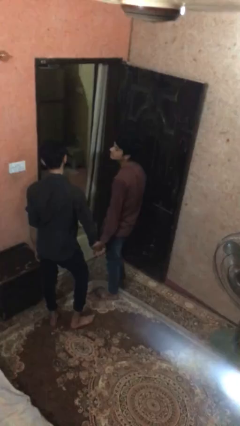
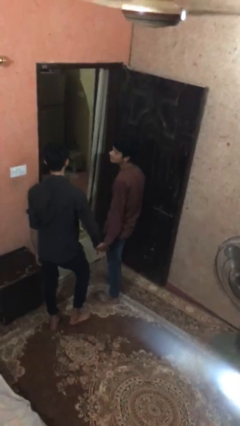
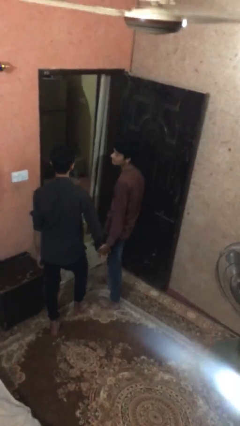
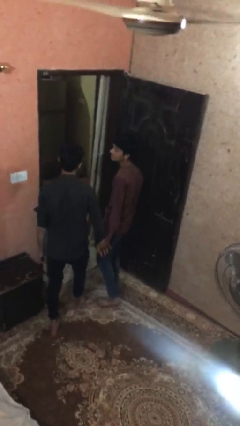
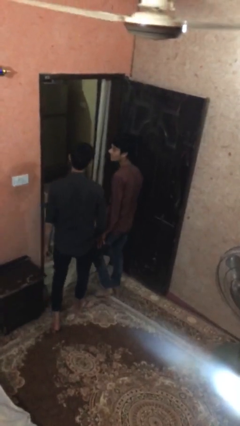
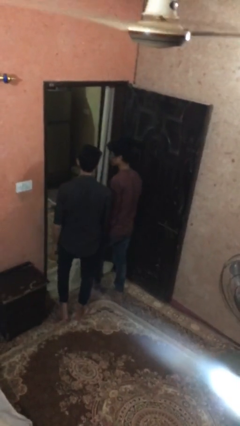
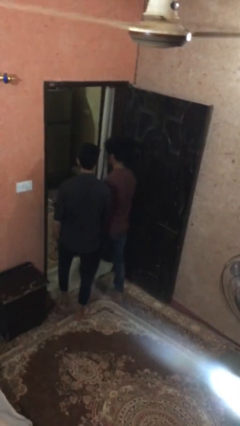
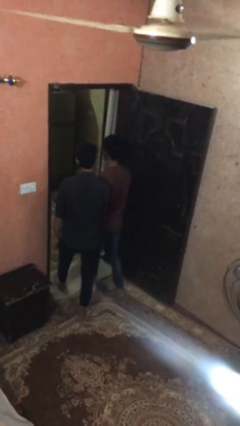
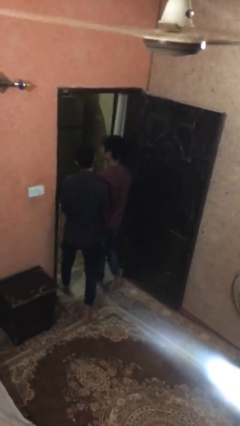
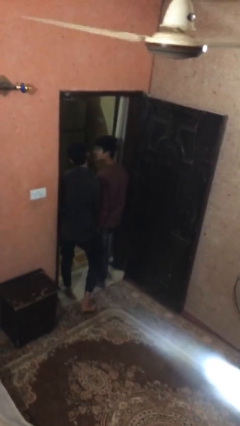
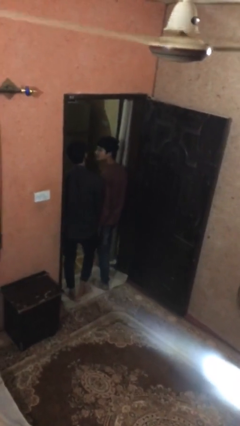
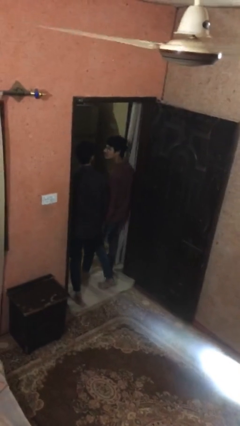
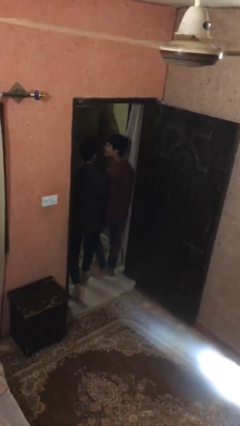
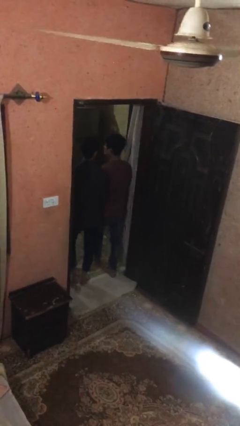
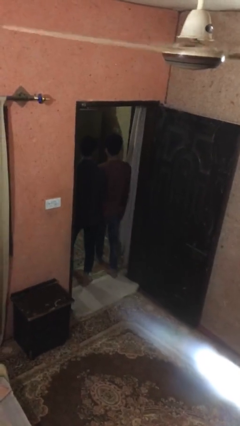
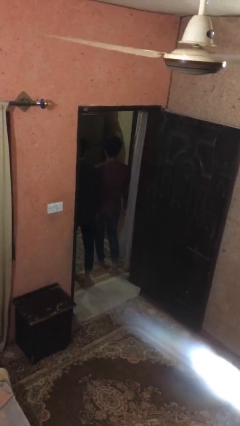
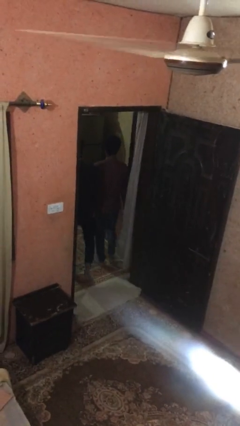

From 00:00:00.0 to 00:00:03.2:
person holds hand

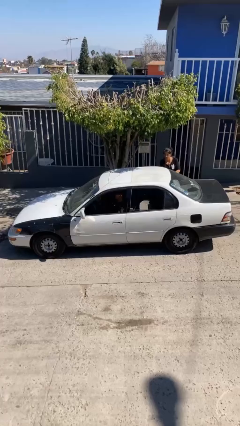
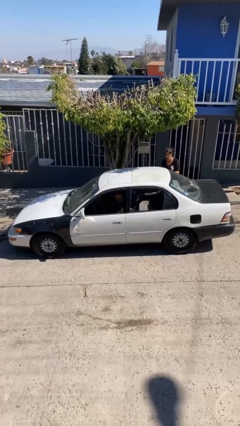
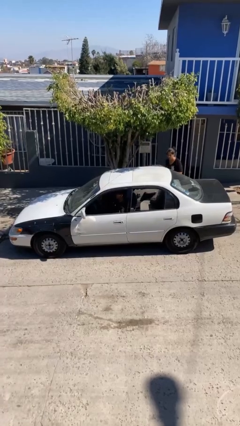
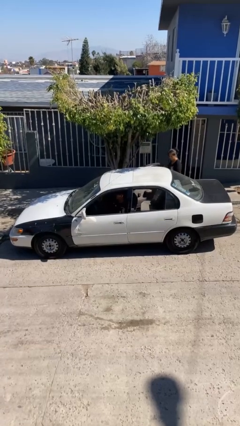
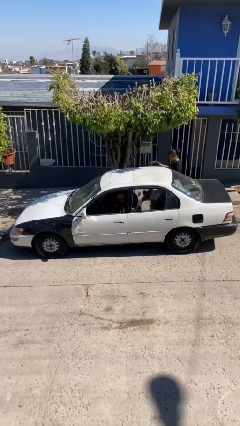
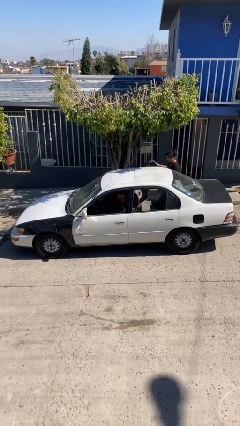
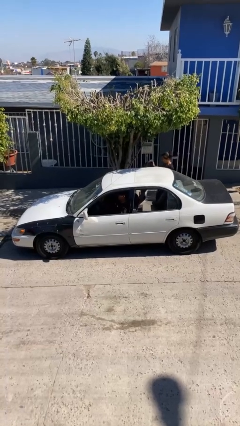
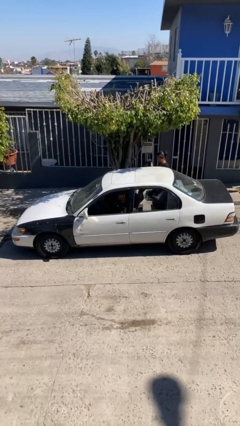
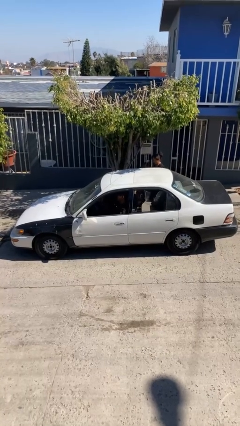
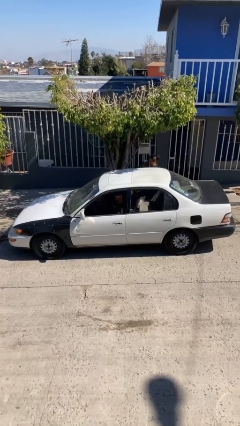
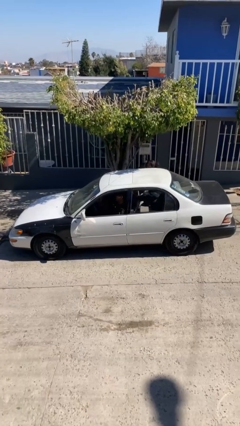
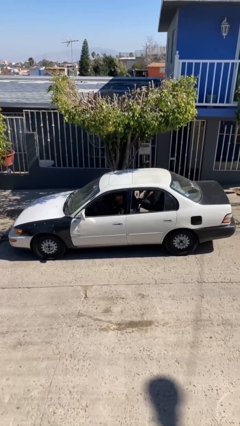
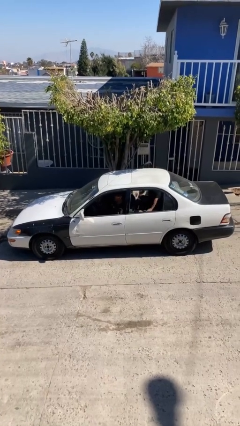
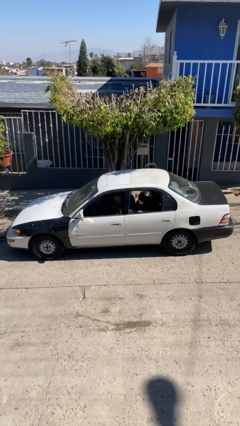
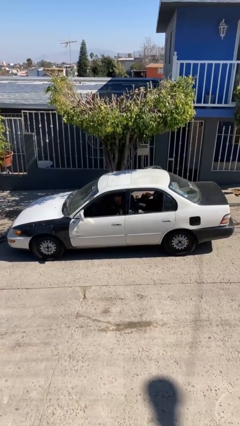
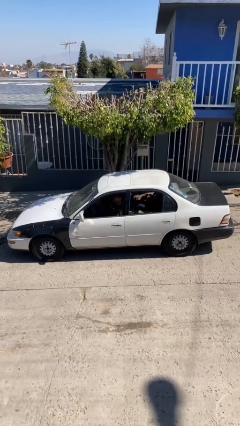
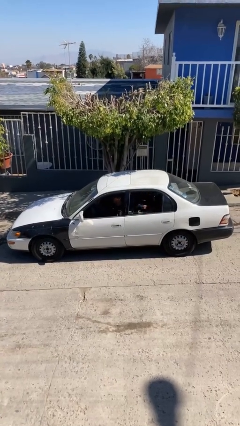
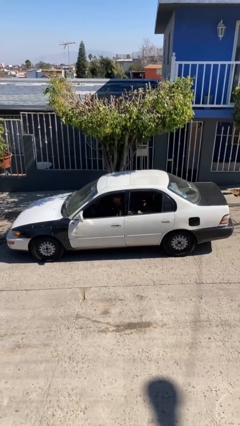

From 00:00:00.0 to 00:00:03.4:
car picks up person

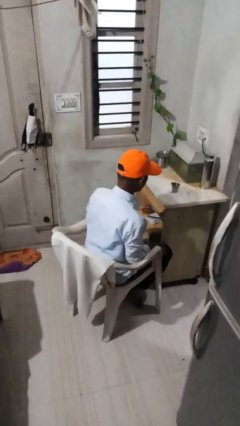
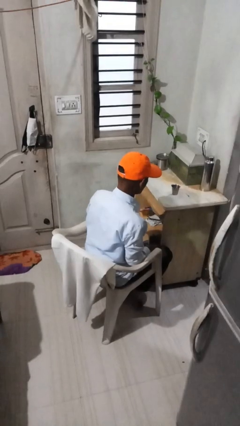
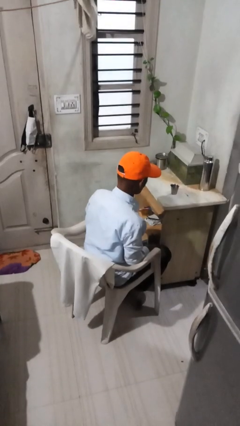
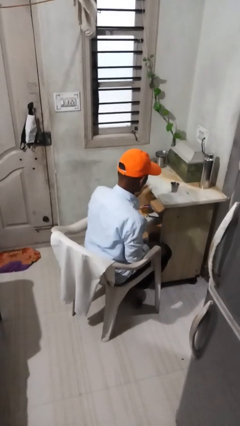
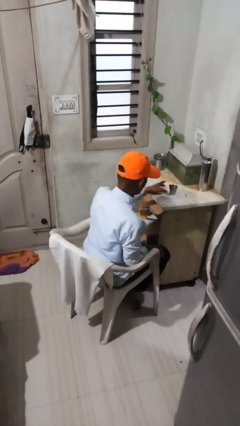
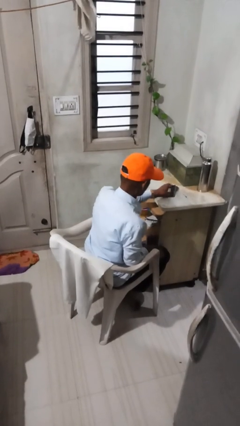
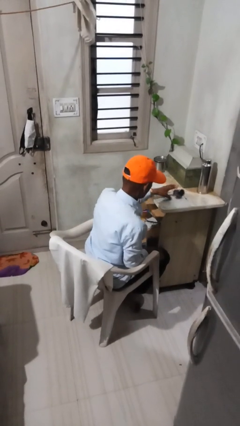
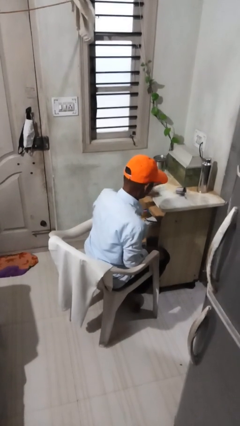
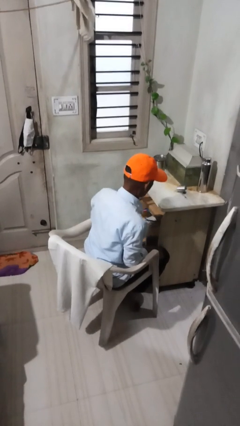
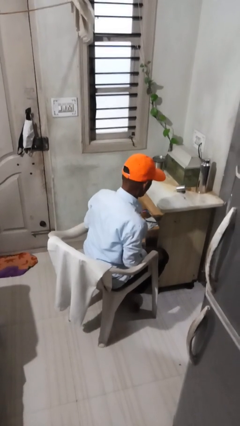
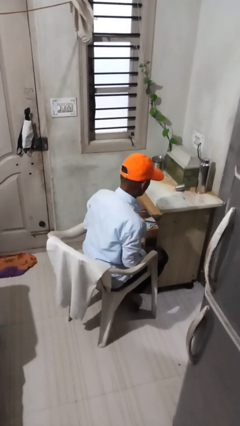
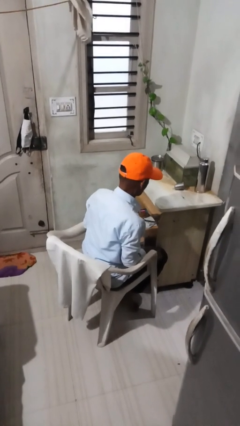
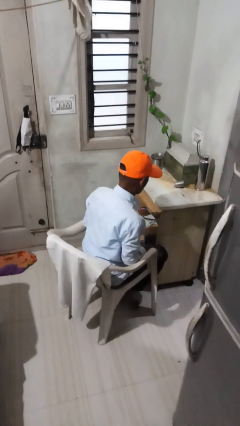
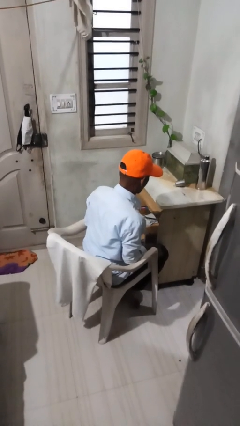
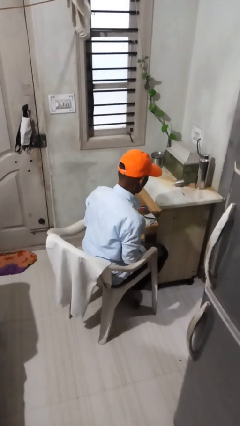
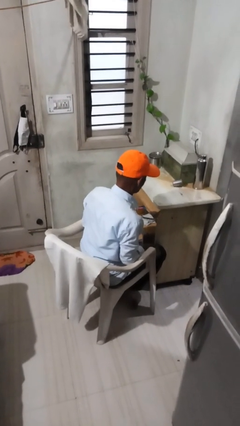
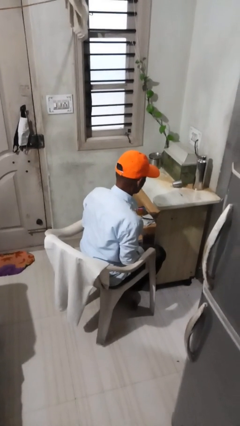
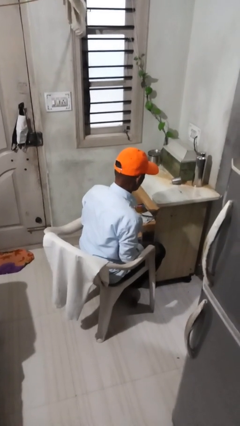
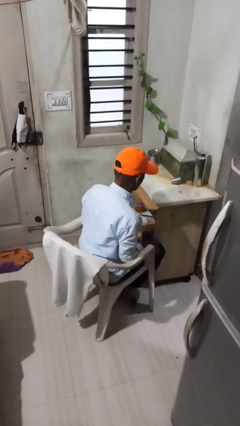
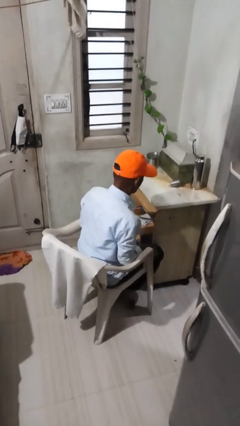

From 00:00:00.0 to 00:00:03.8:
person spills on table

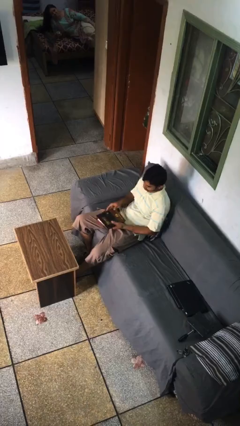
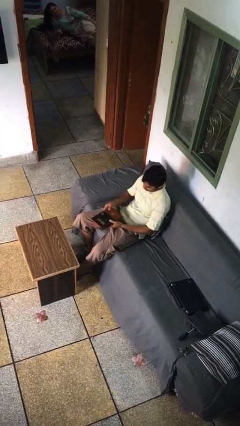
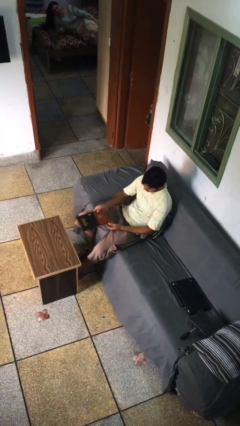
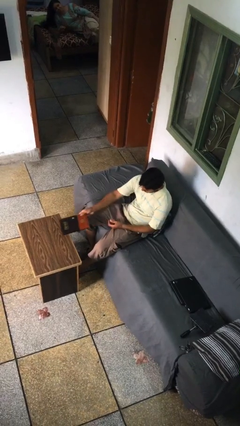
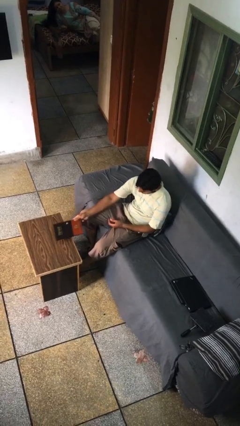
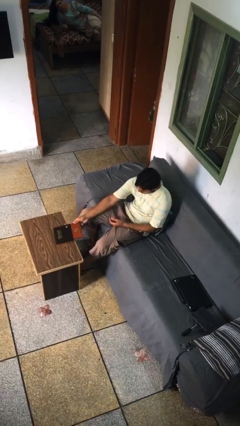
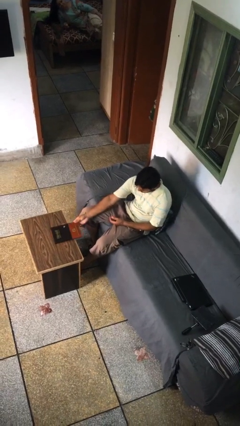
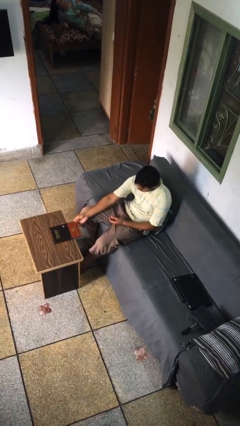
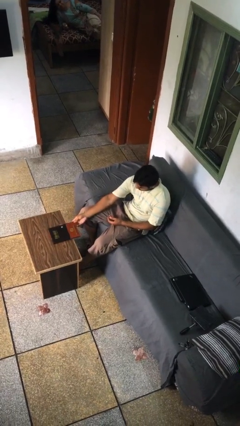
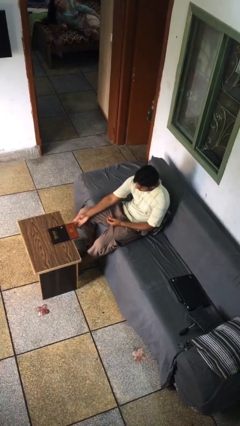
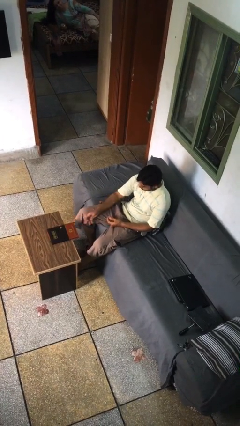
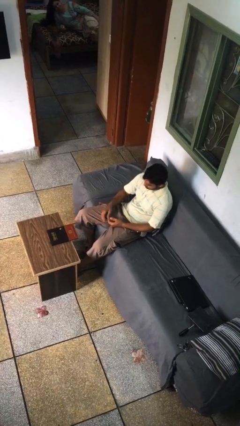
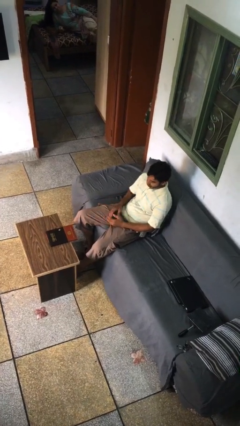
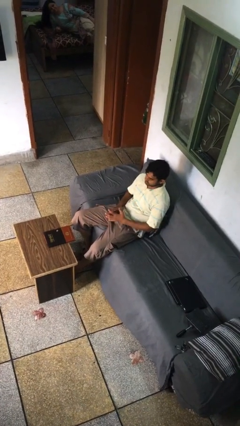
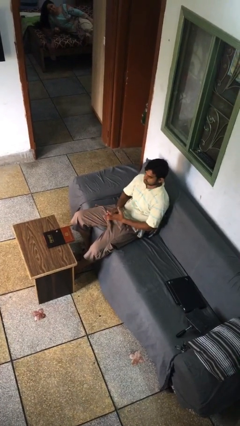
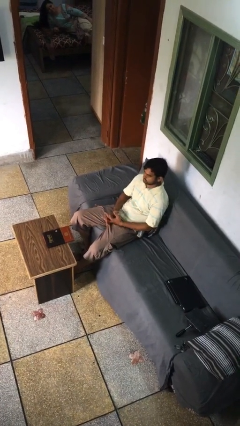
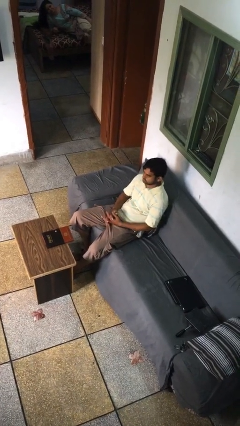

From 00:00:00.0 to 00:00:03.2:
person puts down object on table

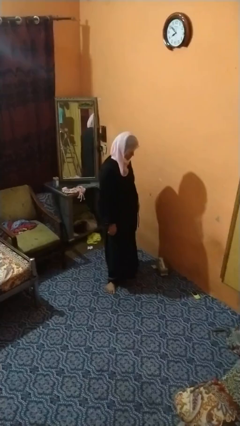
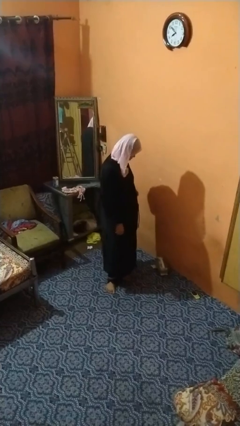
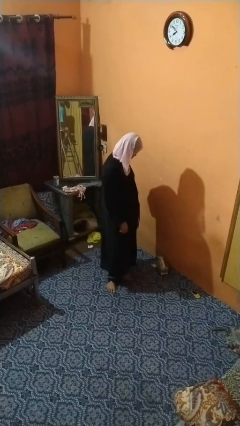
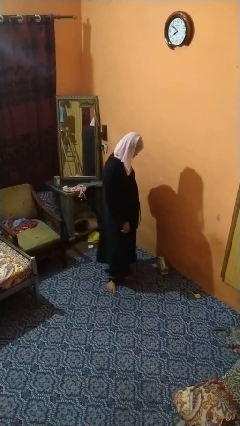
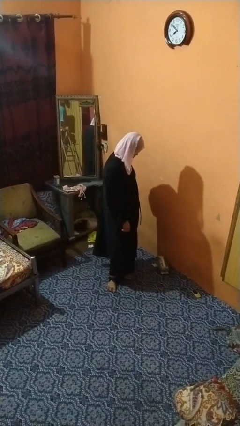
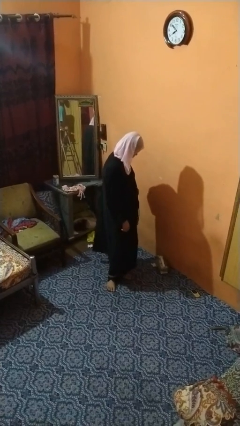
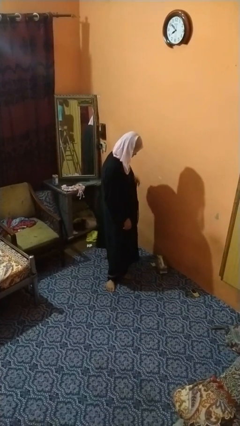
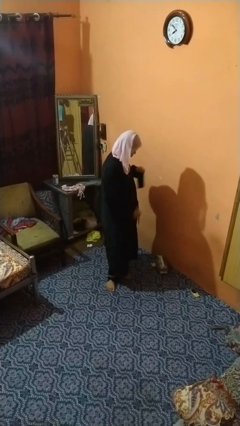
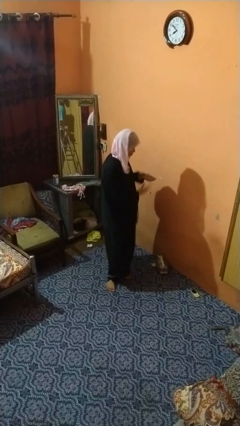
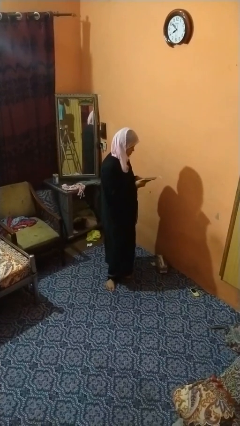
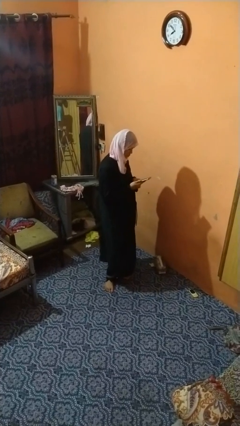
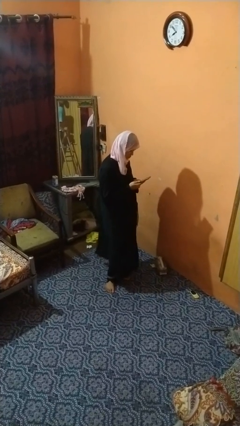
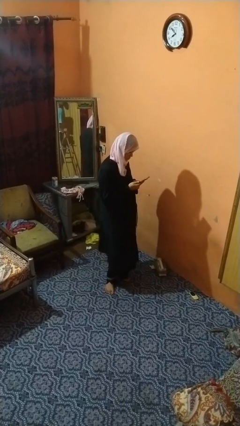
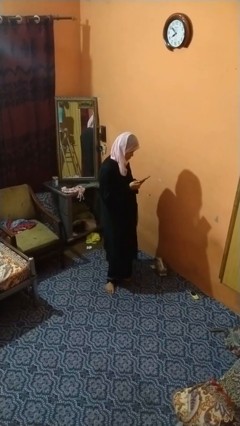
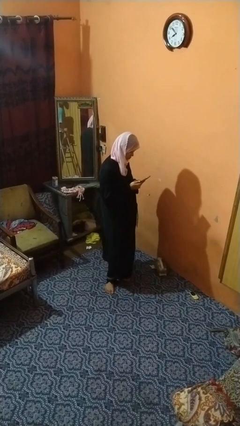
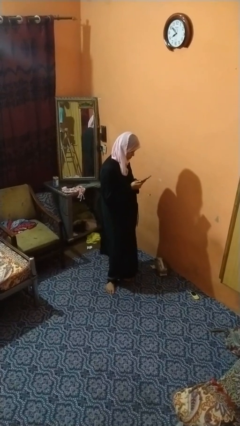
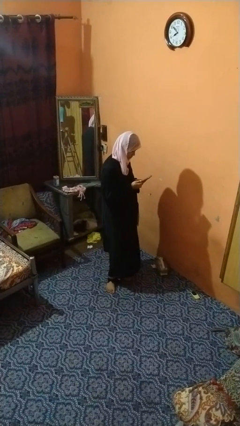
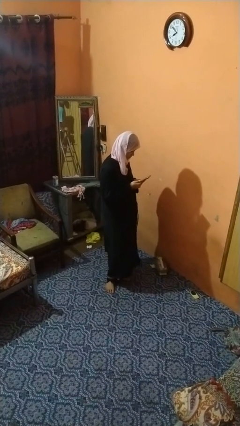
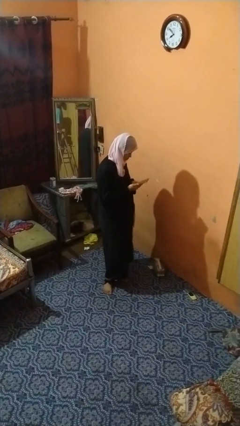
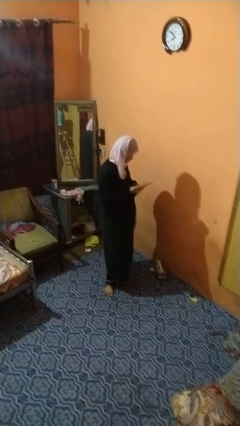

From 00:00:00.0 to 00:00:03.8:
person takes phone from pocket

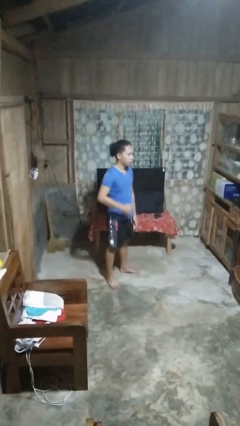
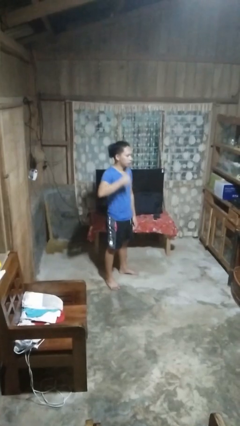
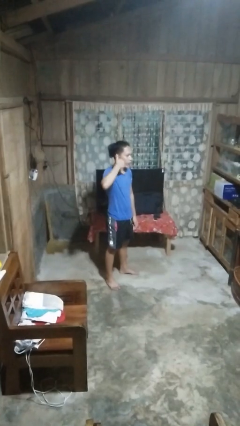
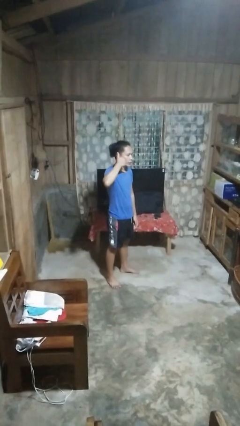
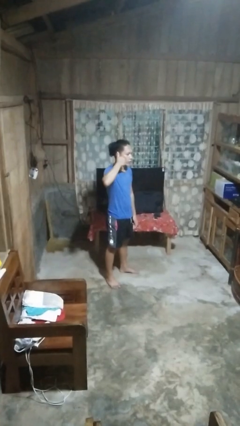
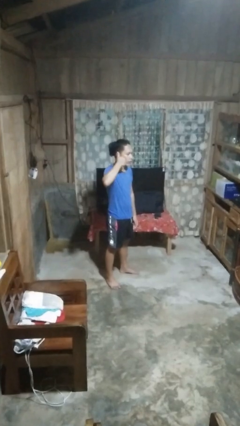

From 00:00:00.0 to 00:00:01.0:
person gestures call me
